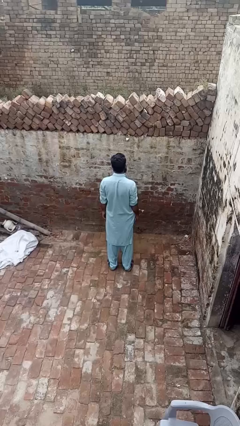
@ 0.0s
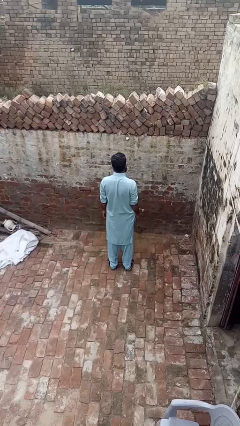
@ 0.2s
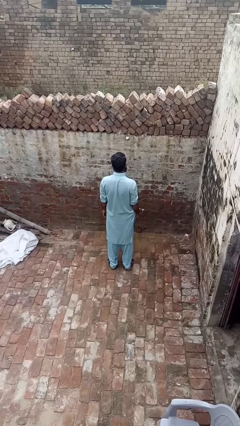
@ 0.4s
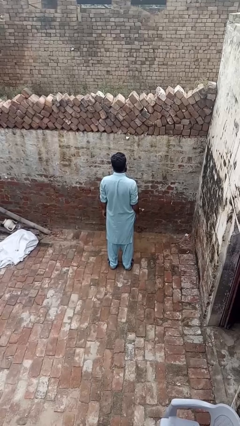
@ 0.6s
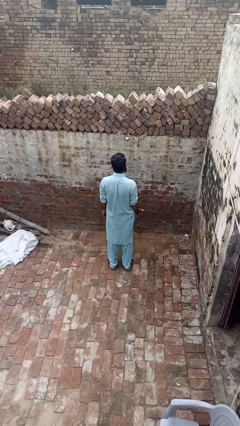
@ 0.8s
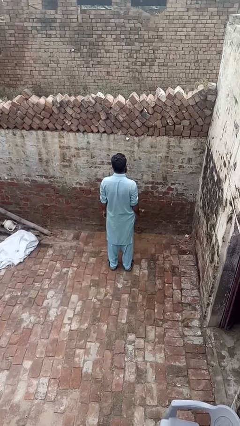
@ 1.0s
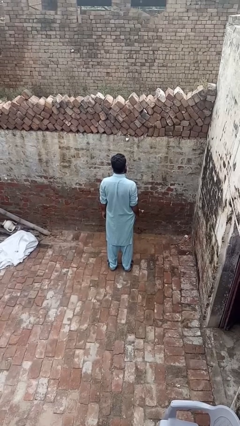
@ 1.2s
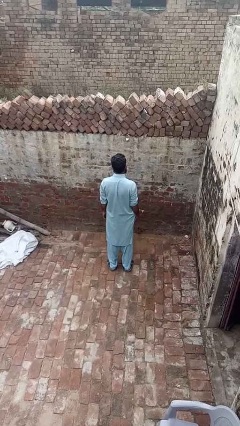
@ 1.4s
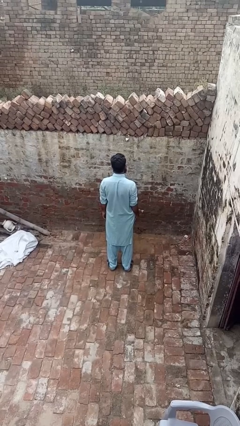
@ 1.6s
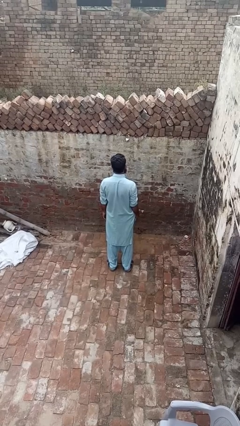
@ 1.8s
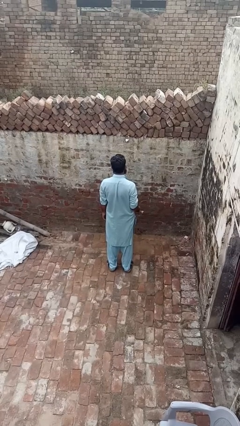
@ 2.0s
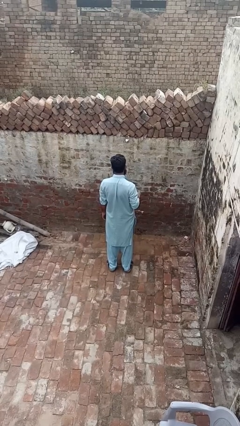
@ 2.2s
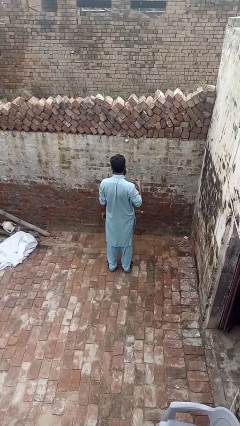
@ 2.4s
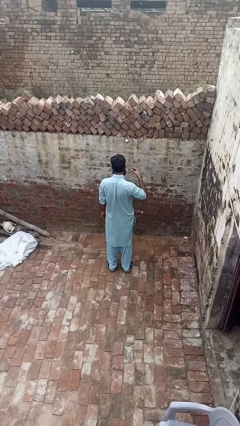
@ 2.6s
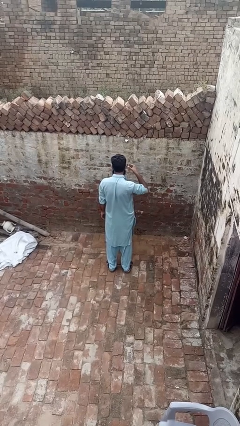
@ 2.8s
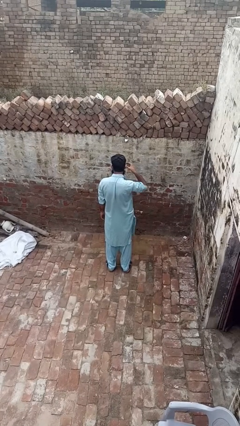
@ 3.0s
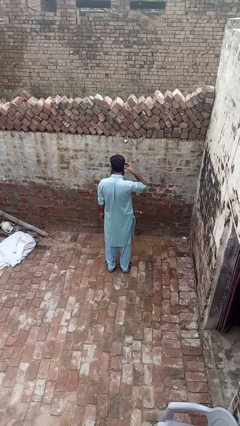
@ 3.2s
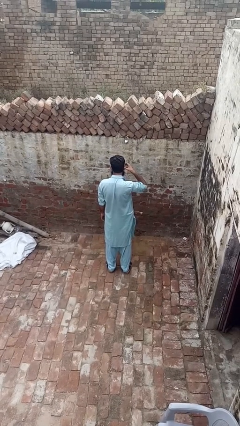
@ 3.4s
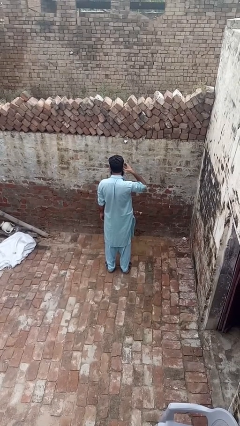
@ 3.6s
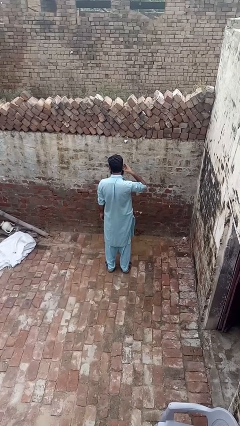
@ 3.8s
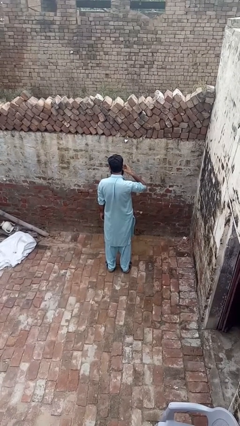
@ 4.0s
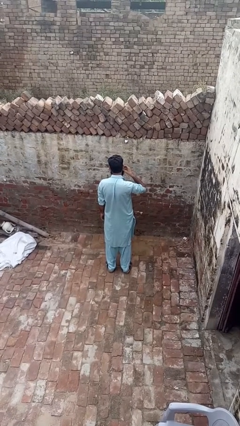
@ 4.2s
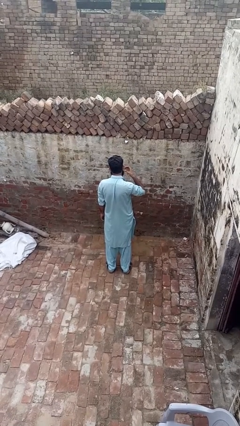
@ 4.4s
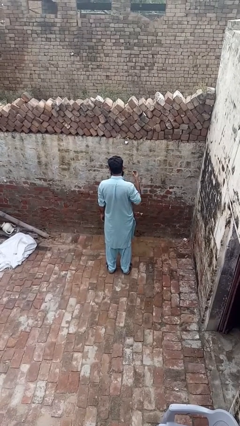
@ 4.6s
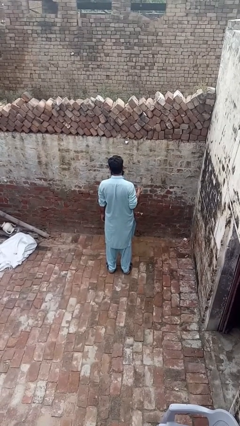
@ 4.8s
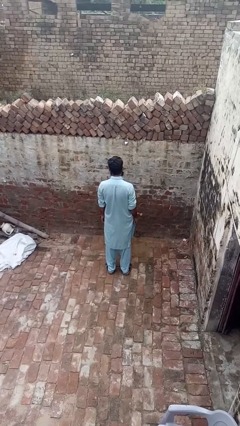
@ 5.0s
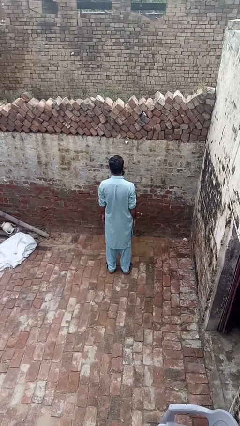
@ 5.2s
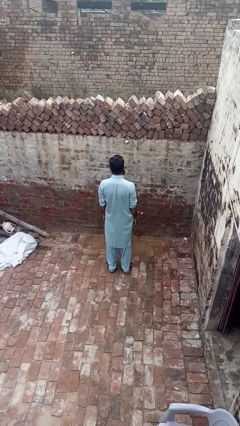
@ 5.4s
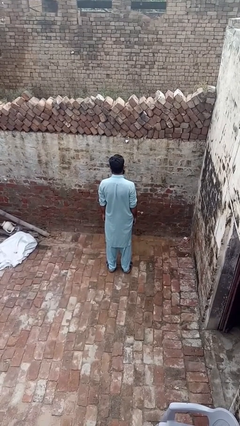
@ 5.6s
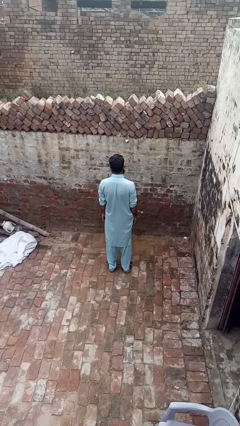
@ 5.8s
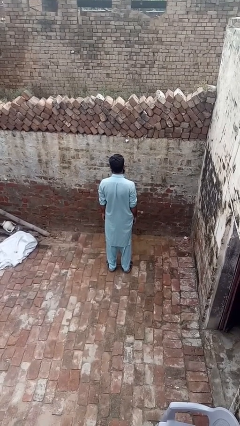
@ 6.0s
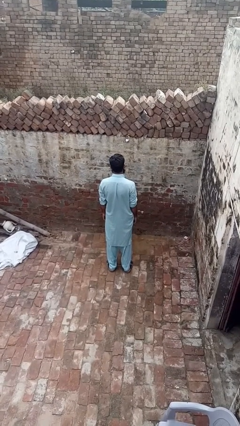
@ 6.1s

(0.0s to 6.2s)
person puts on earrings

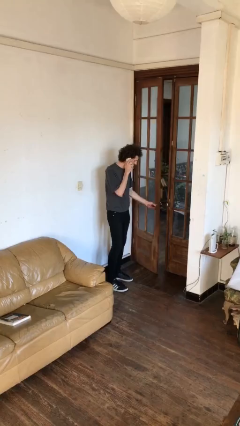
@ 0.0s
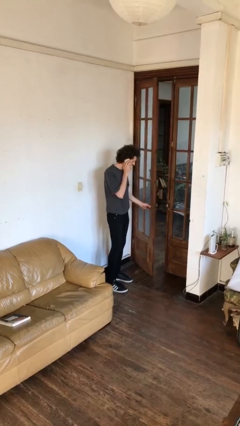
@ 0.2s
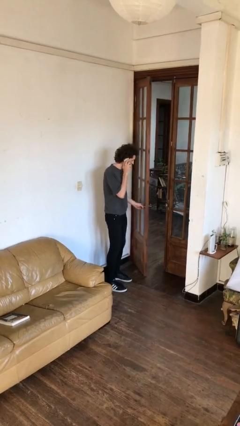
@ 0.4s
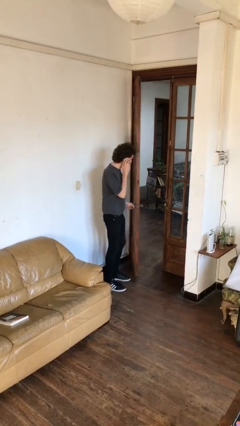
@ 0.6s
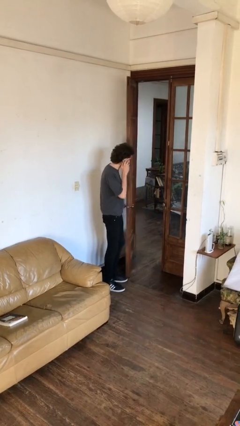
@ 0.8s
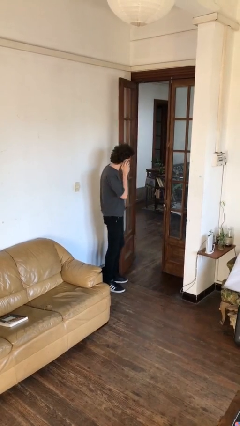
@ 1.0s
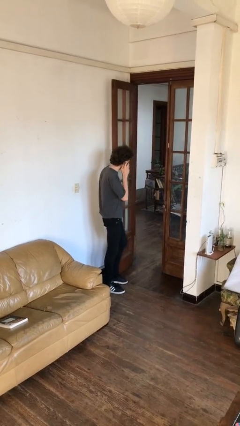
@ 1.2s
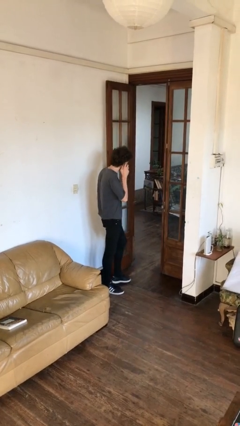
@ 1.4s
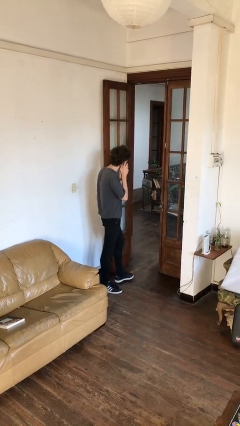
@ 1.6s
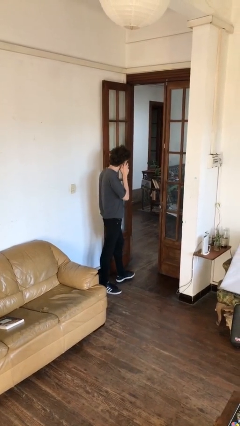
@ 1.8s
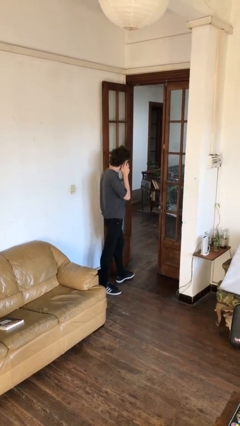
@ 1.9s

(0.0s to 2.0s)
person opens facility door

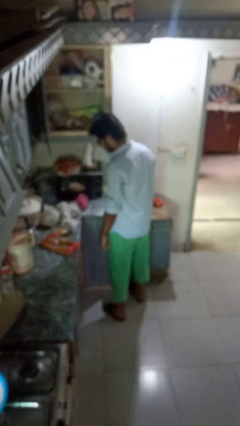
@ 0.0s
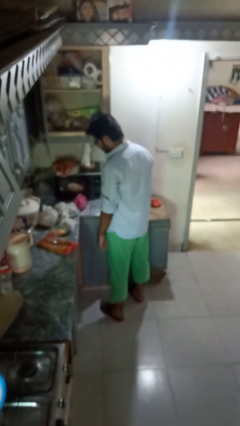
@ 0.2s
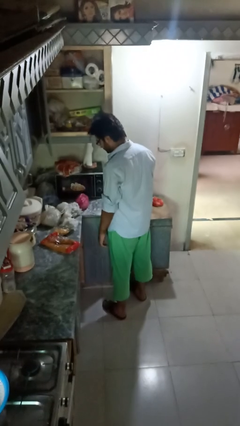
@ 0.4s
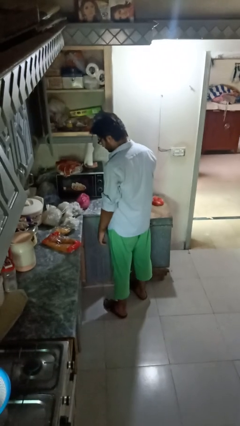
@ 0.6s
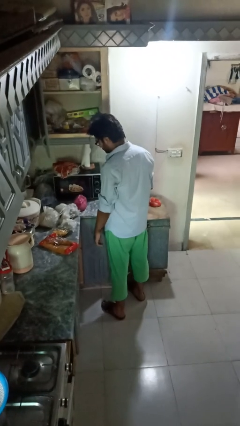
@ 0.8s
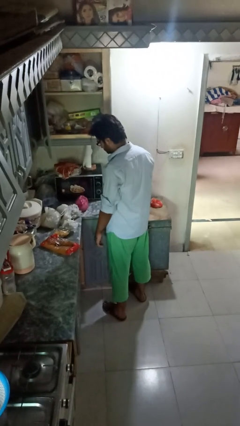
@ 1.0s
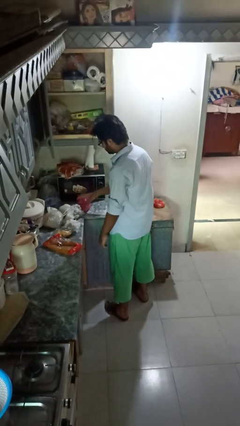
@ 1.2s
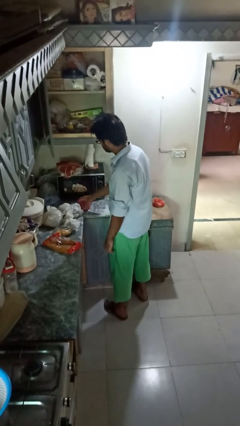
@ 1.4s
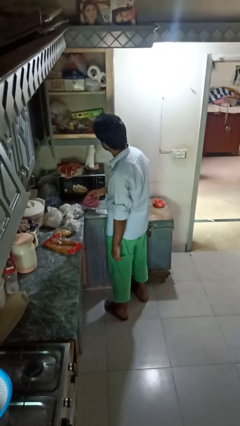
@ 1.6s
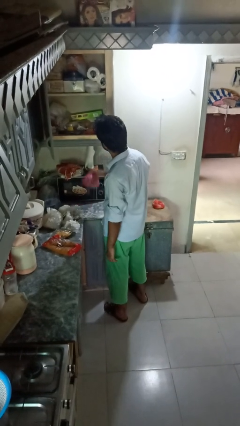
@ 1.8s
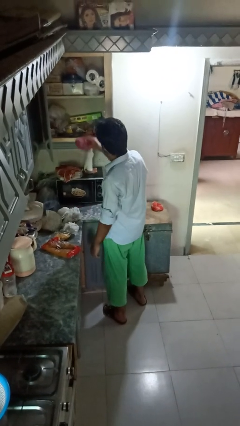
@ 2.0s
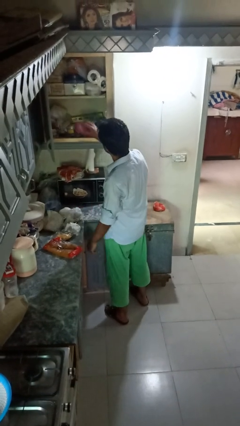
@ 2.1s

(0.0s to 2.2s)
person loads groceries into cabinet

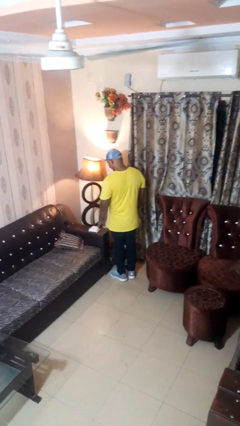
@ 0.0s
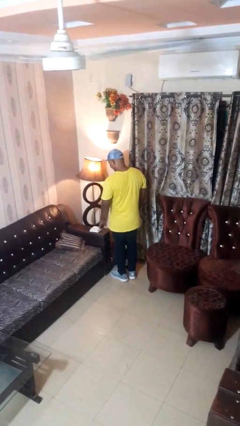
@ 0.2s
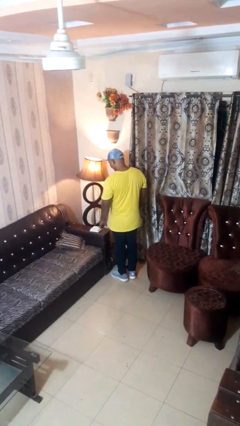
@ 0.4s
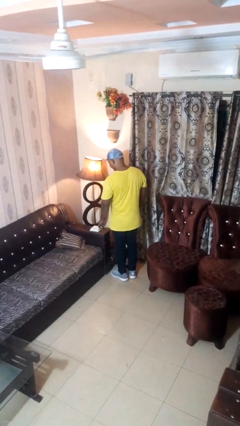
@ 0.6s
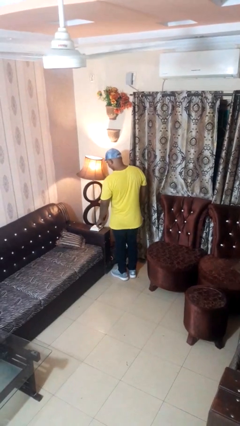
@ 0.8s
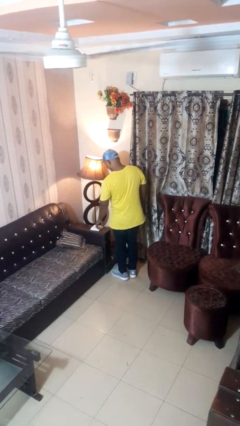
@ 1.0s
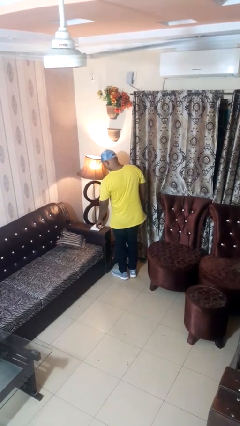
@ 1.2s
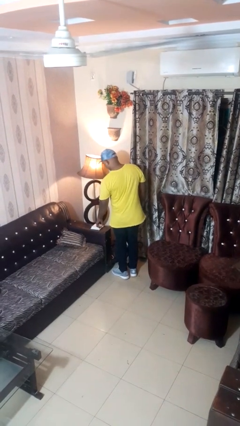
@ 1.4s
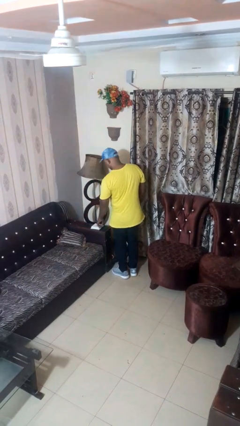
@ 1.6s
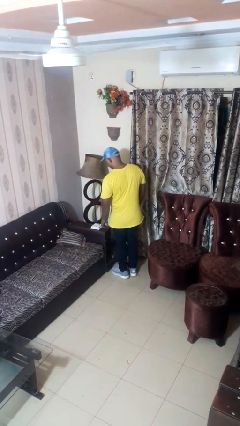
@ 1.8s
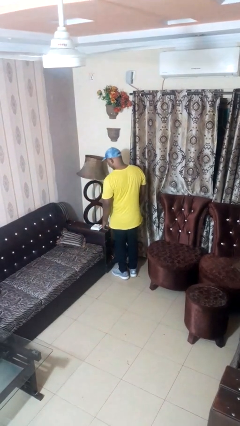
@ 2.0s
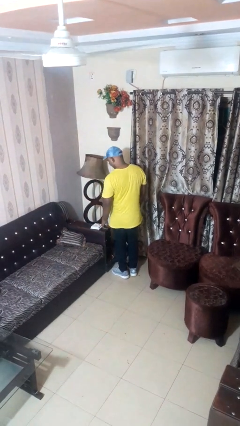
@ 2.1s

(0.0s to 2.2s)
person turns off lamp

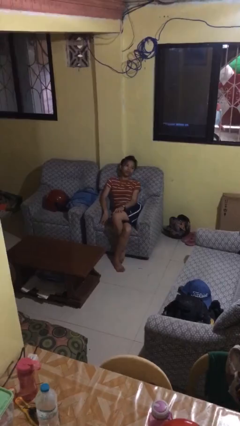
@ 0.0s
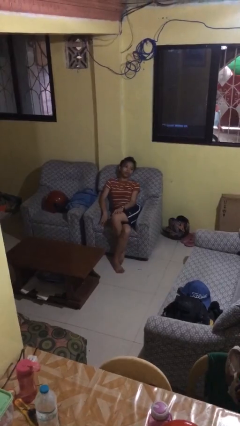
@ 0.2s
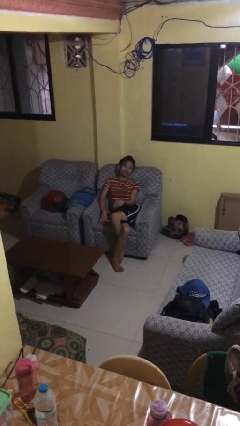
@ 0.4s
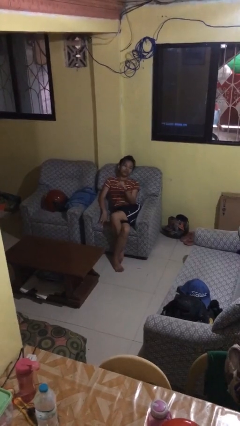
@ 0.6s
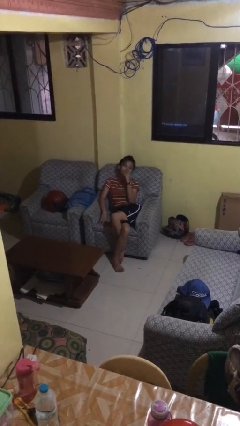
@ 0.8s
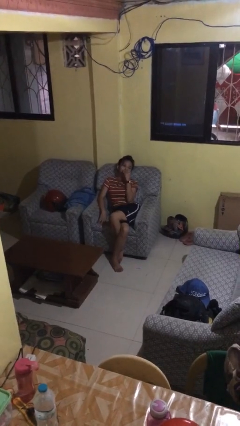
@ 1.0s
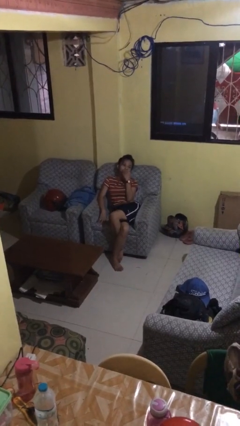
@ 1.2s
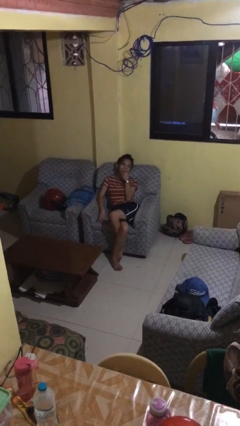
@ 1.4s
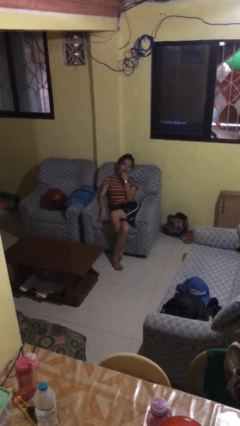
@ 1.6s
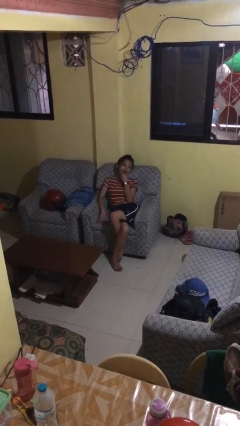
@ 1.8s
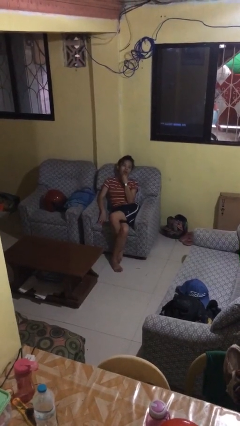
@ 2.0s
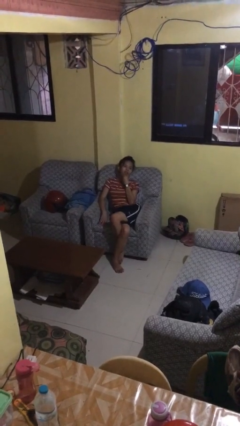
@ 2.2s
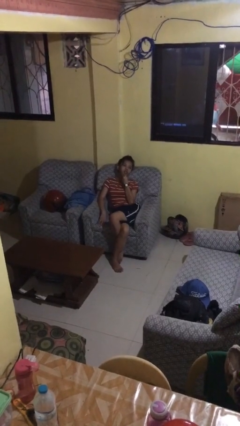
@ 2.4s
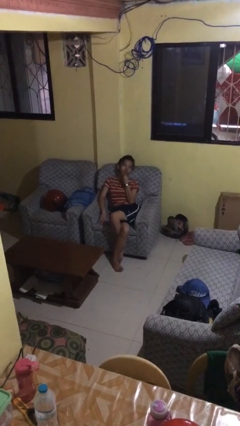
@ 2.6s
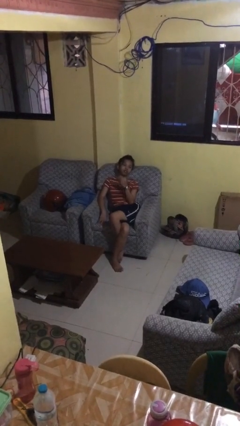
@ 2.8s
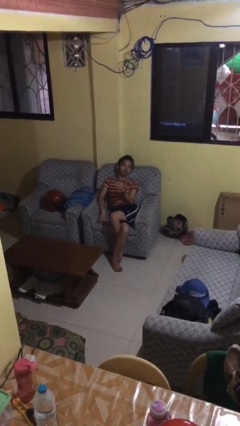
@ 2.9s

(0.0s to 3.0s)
person strokes chin

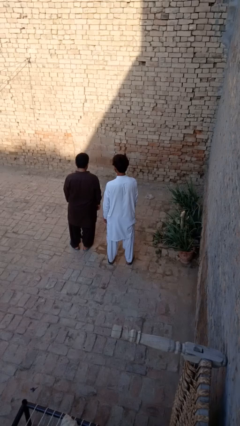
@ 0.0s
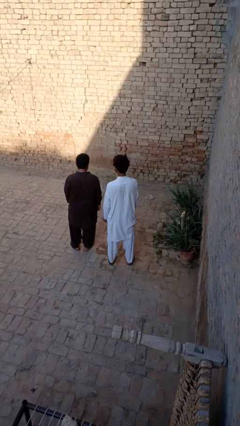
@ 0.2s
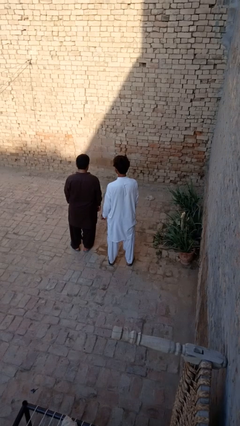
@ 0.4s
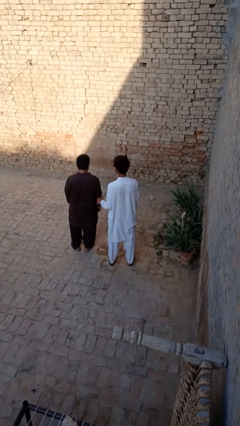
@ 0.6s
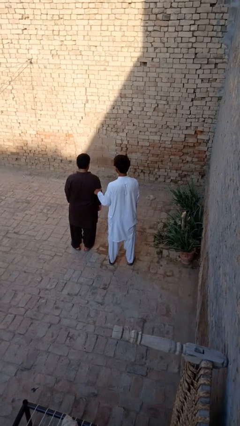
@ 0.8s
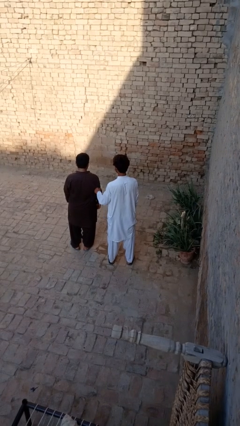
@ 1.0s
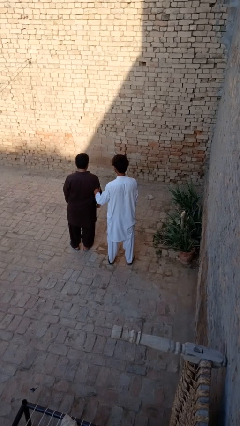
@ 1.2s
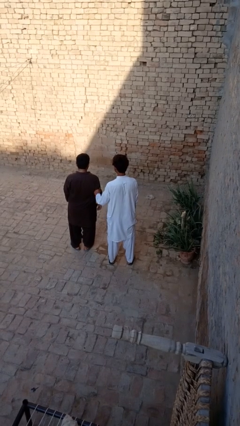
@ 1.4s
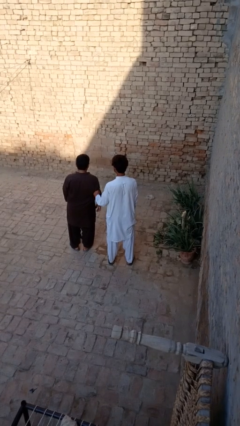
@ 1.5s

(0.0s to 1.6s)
person tickles person
